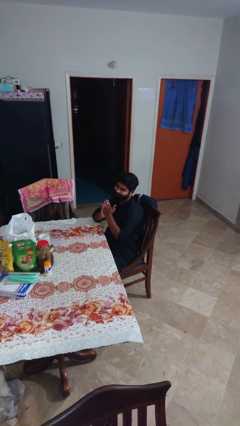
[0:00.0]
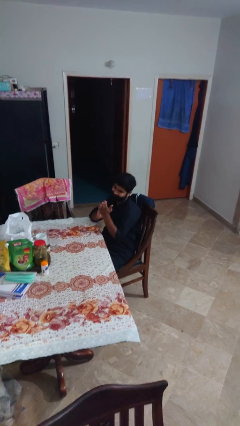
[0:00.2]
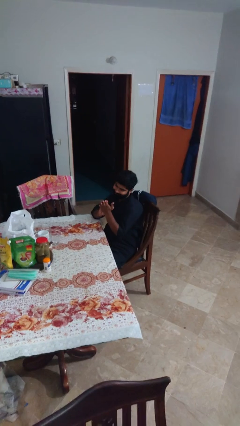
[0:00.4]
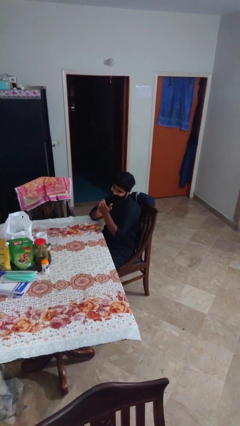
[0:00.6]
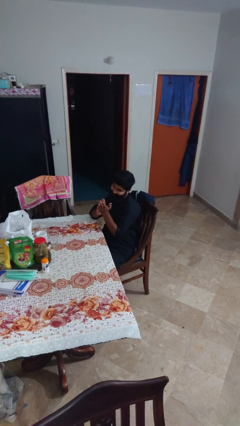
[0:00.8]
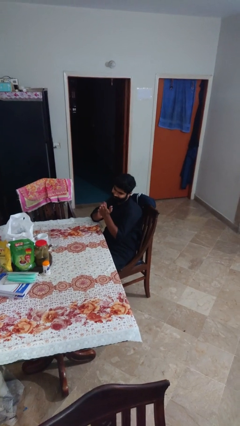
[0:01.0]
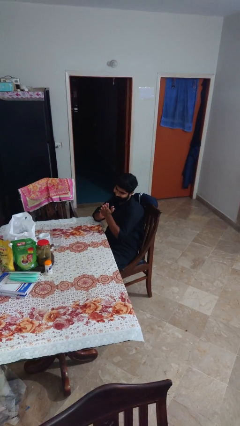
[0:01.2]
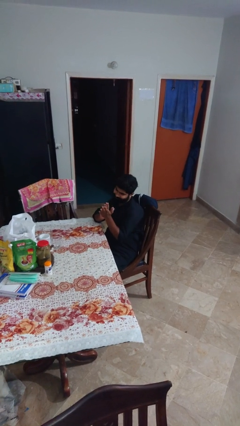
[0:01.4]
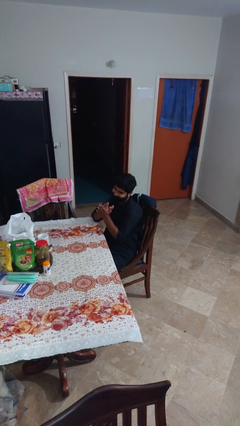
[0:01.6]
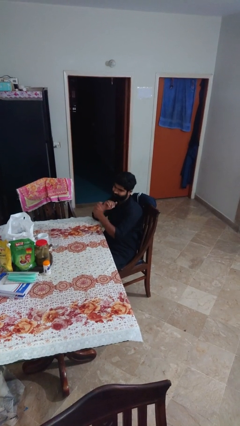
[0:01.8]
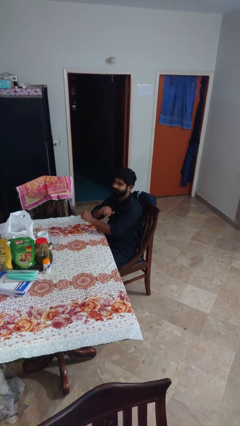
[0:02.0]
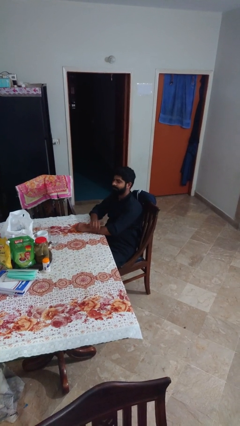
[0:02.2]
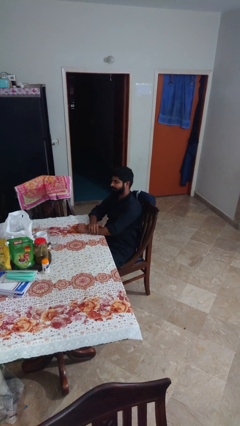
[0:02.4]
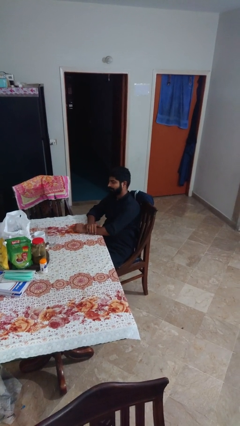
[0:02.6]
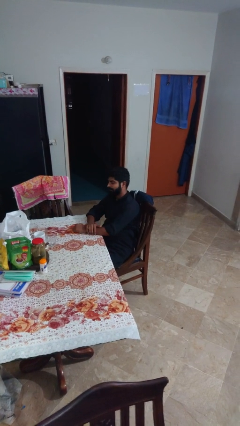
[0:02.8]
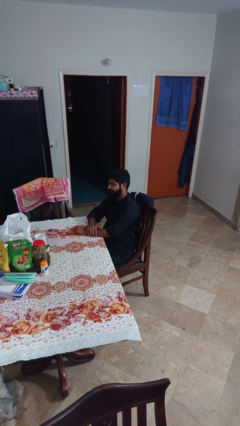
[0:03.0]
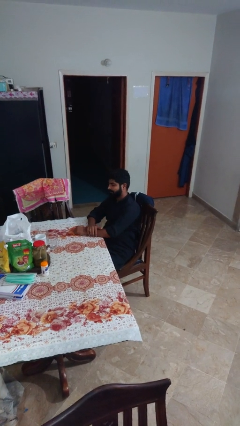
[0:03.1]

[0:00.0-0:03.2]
person claps hands

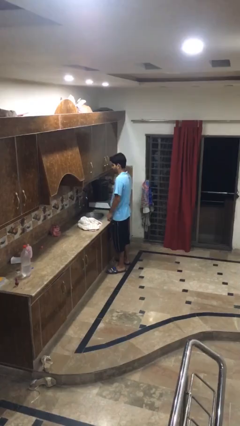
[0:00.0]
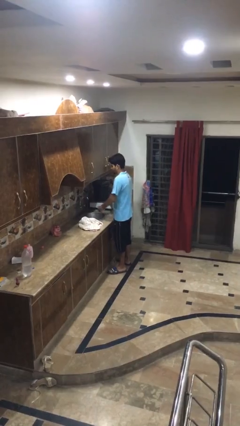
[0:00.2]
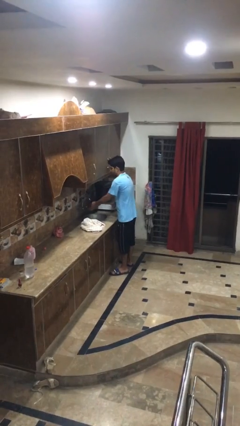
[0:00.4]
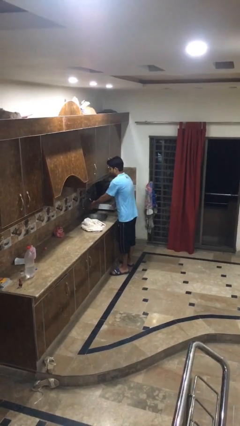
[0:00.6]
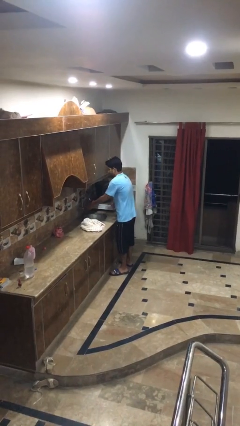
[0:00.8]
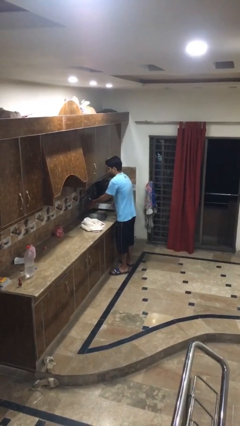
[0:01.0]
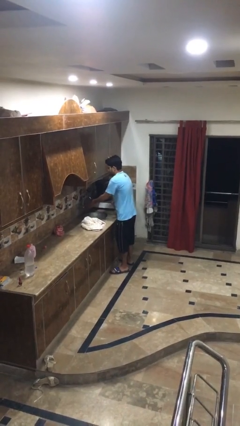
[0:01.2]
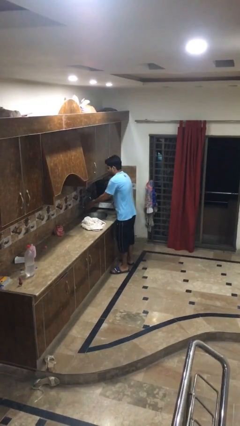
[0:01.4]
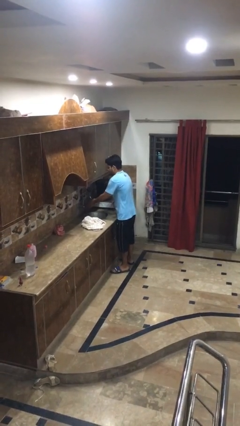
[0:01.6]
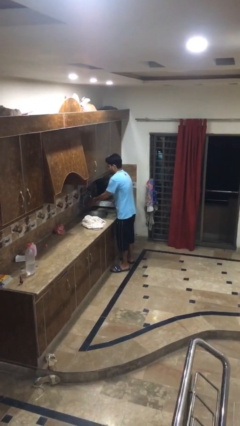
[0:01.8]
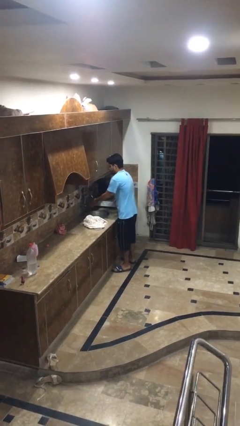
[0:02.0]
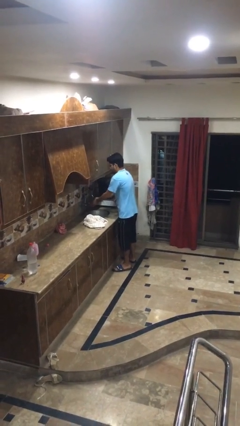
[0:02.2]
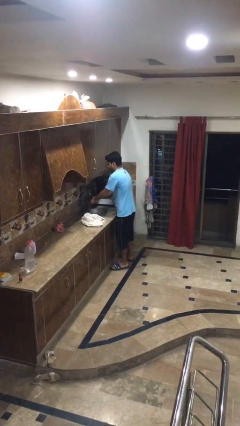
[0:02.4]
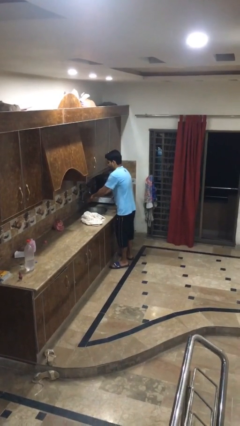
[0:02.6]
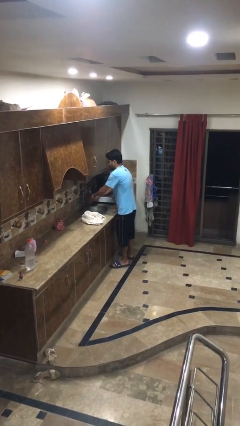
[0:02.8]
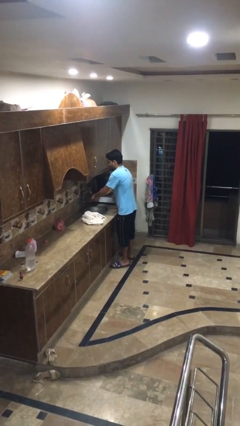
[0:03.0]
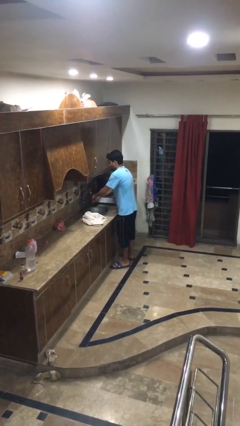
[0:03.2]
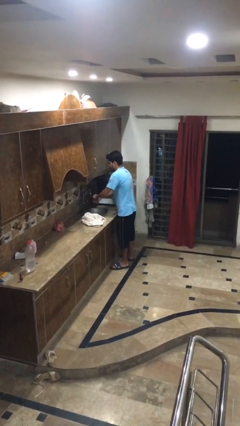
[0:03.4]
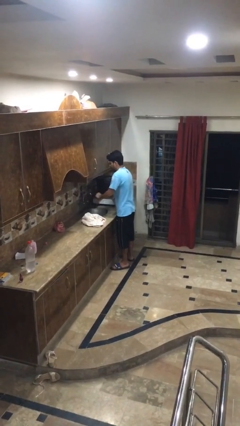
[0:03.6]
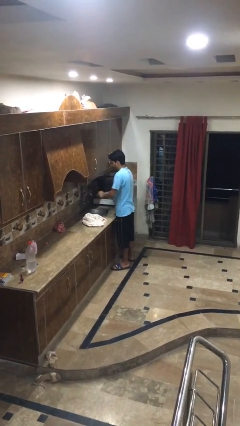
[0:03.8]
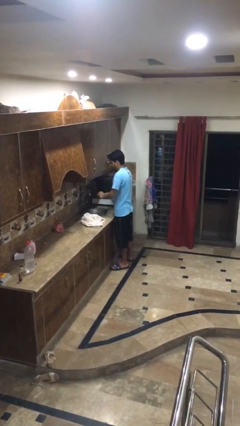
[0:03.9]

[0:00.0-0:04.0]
person washes hands

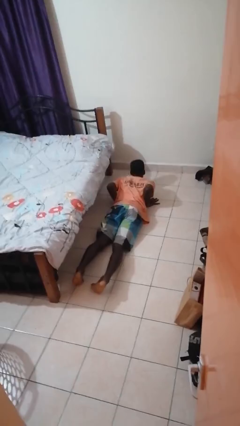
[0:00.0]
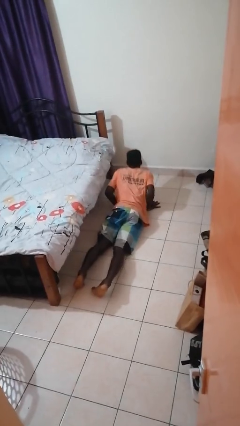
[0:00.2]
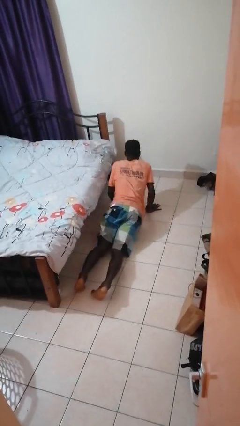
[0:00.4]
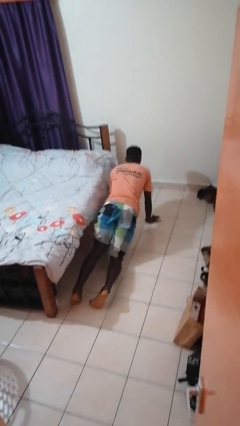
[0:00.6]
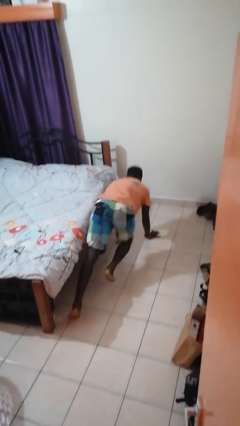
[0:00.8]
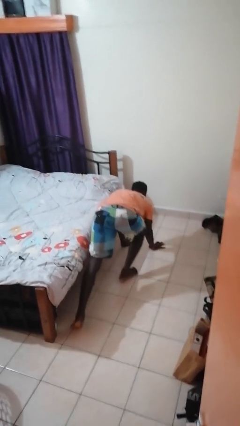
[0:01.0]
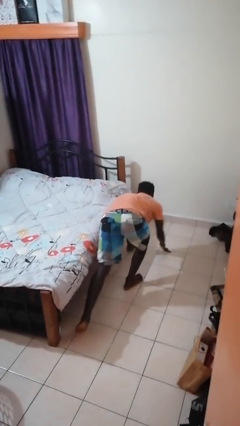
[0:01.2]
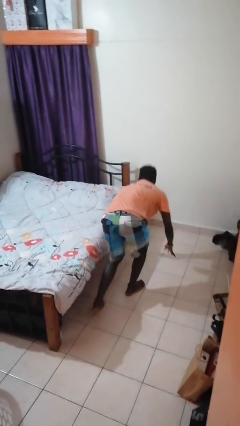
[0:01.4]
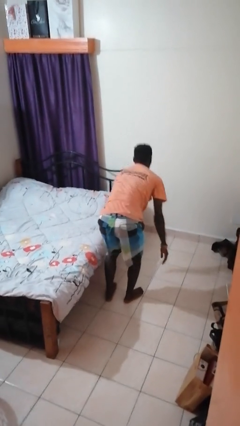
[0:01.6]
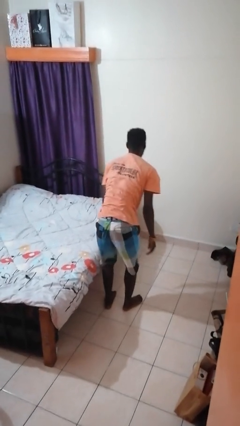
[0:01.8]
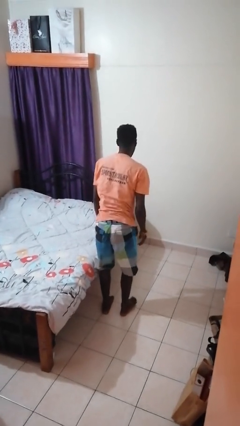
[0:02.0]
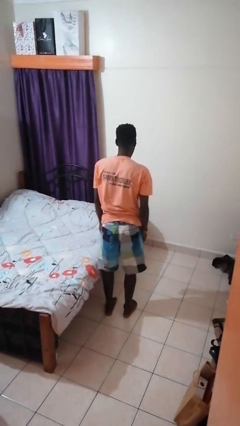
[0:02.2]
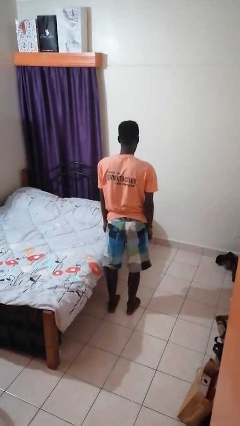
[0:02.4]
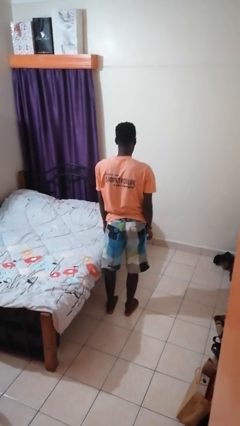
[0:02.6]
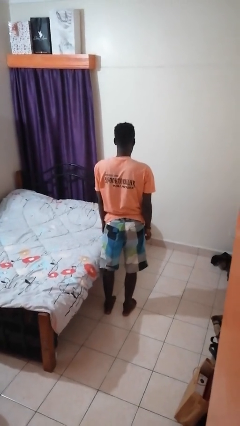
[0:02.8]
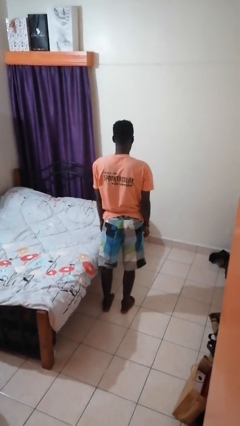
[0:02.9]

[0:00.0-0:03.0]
person stands up from floor

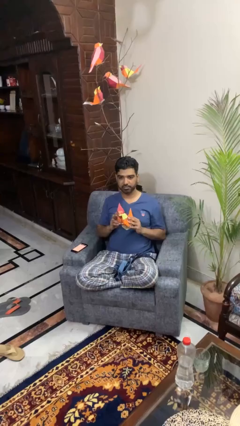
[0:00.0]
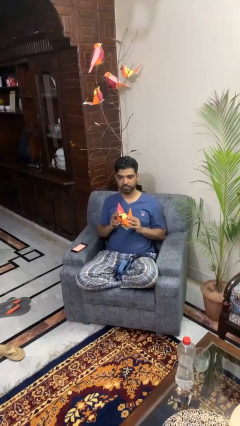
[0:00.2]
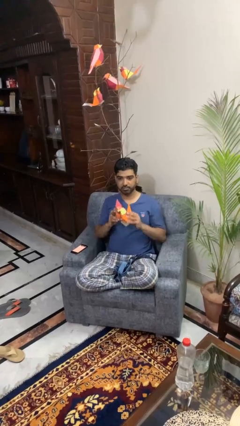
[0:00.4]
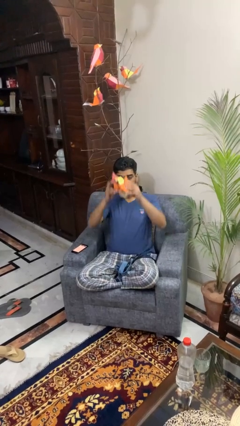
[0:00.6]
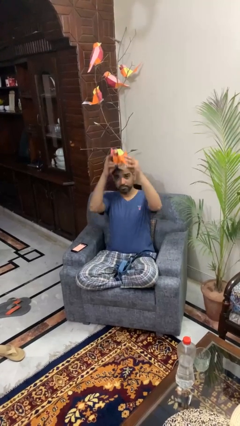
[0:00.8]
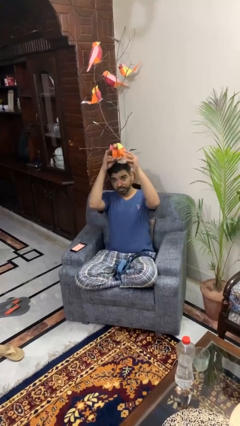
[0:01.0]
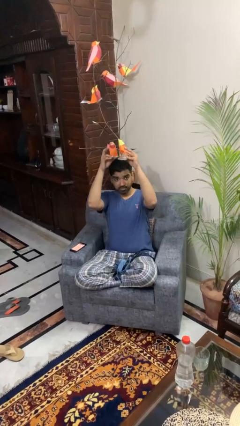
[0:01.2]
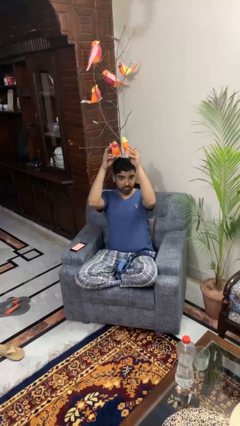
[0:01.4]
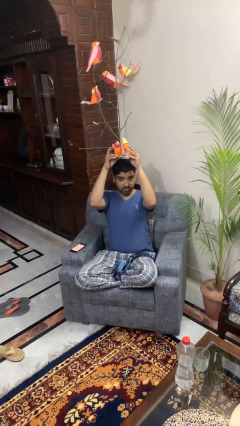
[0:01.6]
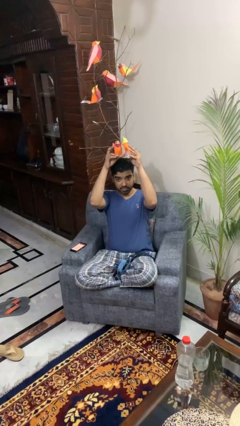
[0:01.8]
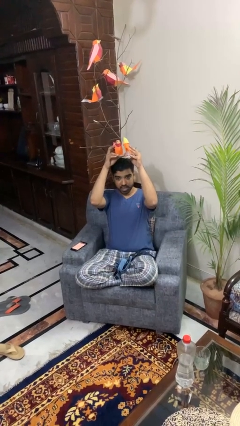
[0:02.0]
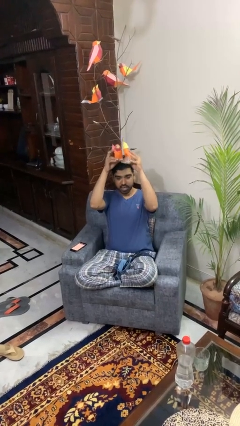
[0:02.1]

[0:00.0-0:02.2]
person holds object above head

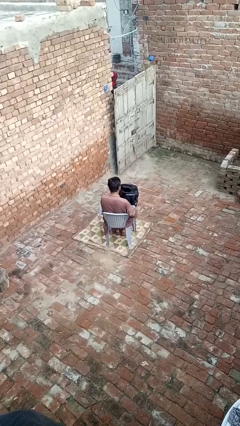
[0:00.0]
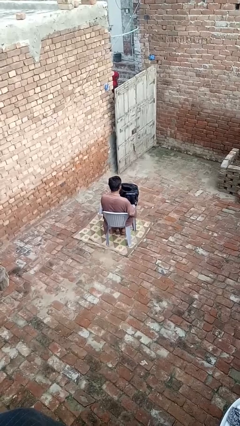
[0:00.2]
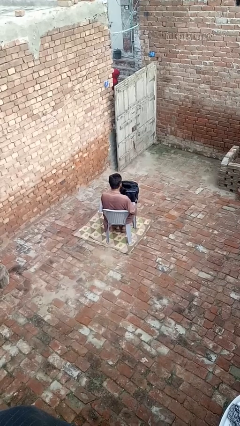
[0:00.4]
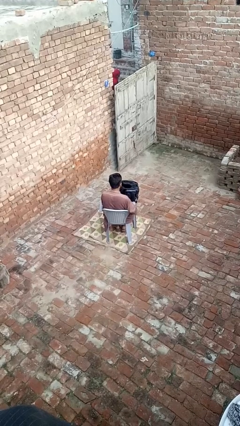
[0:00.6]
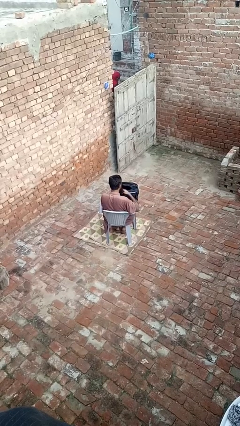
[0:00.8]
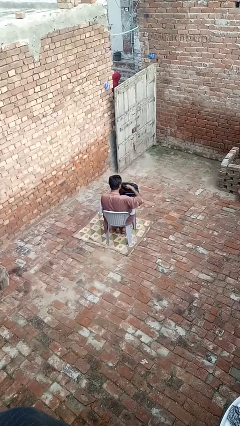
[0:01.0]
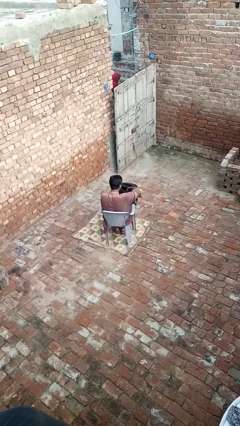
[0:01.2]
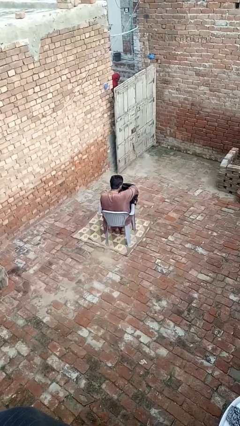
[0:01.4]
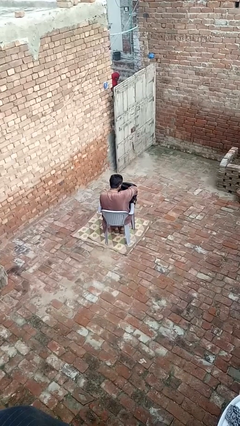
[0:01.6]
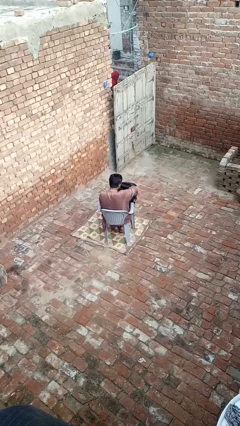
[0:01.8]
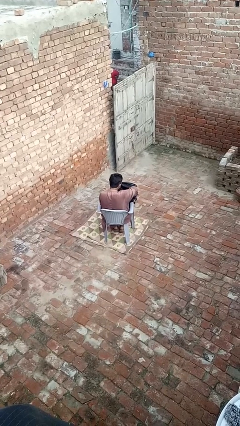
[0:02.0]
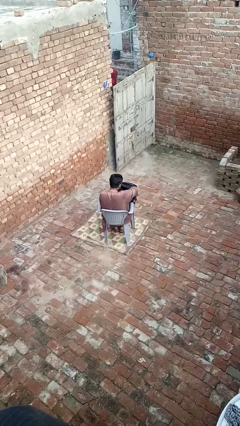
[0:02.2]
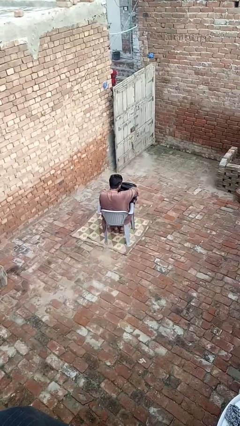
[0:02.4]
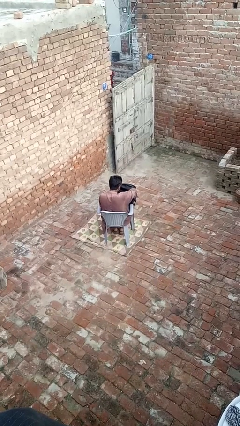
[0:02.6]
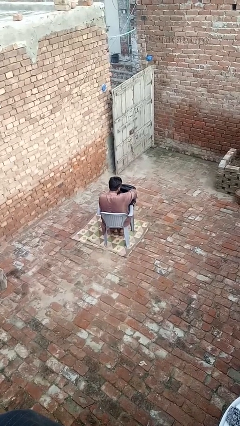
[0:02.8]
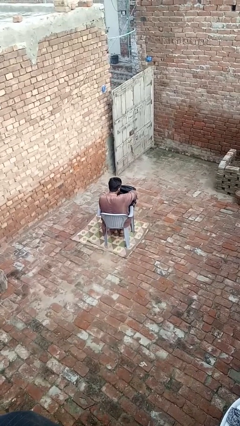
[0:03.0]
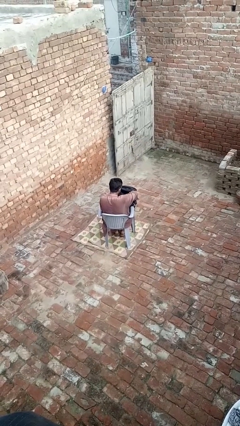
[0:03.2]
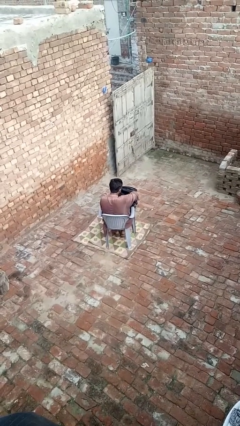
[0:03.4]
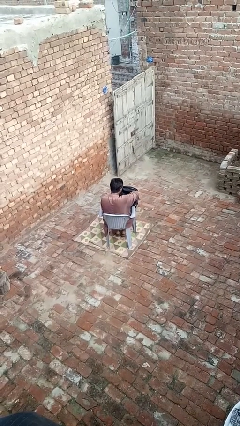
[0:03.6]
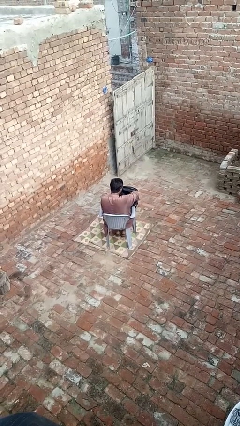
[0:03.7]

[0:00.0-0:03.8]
person searches in backpack

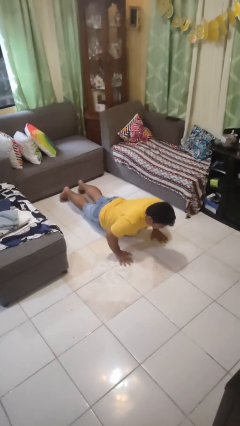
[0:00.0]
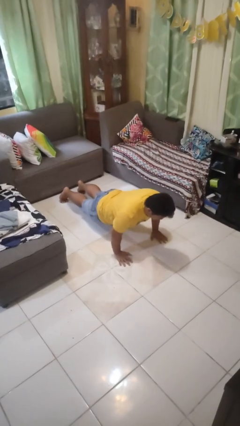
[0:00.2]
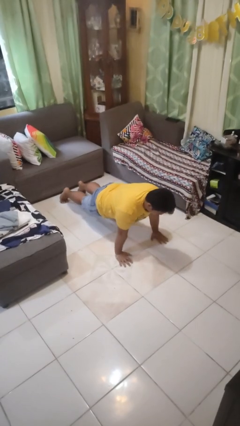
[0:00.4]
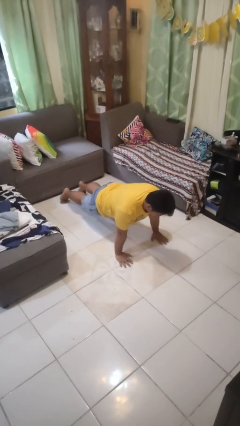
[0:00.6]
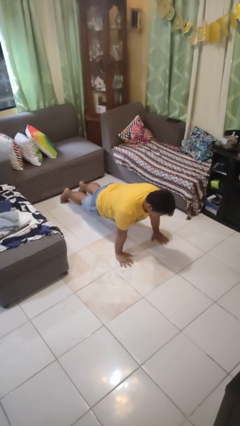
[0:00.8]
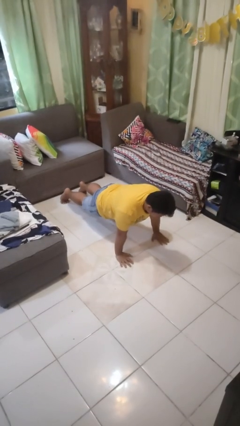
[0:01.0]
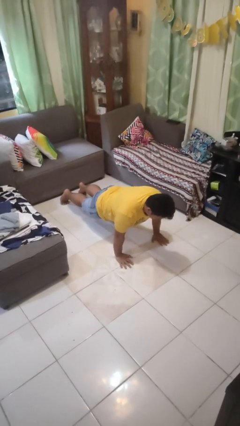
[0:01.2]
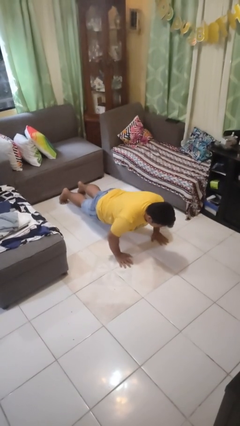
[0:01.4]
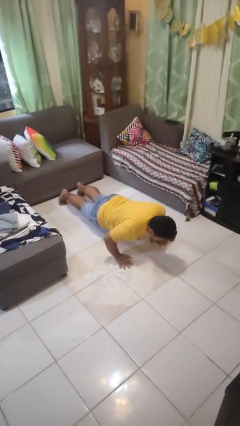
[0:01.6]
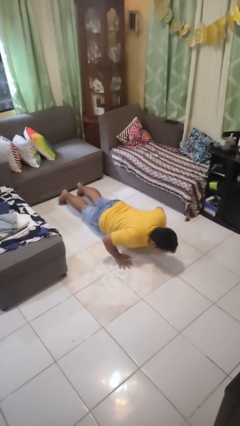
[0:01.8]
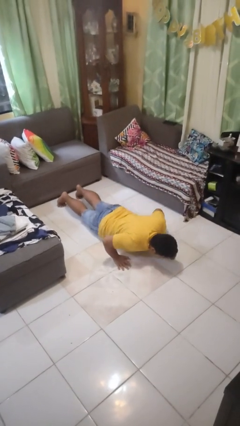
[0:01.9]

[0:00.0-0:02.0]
person exercises with pushup
